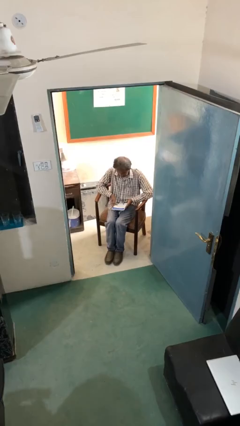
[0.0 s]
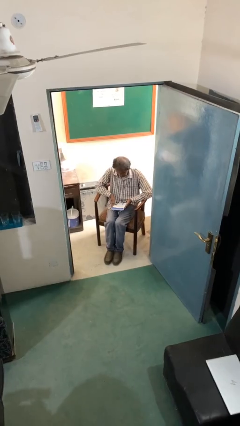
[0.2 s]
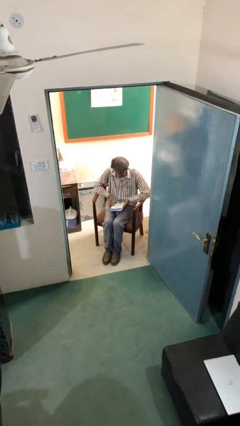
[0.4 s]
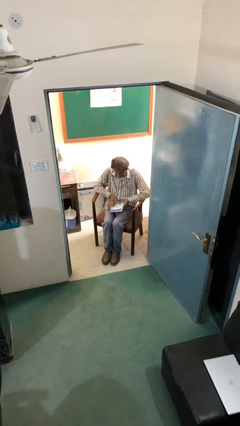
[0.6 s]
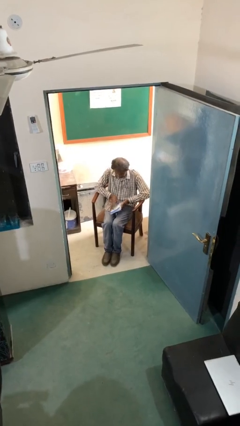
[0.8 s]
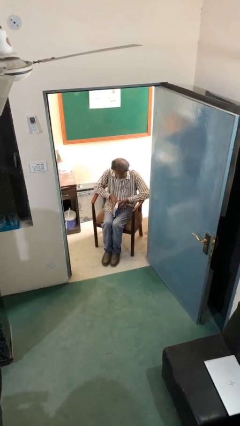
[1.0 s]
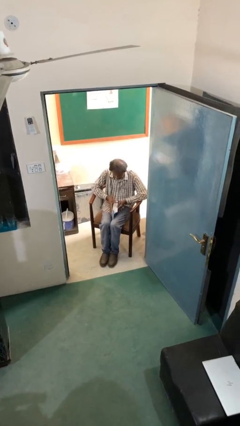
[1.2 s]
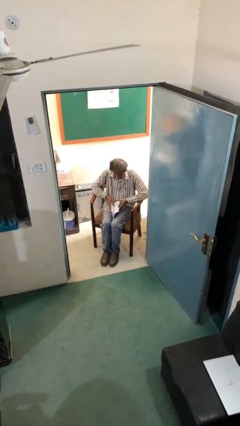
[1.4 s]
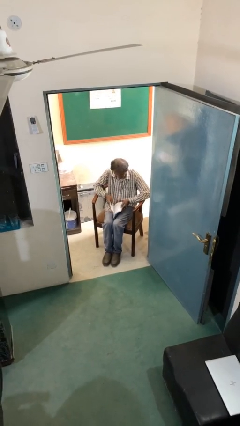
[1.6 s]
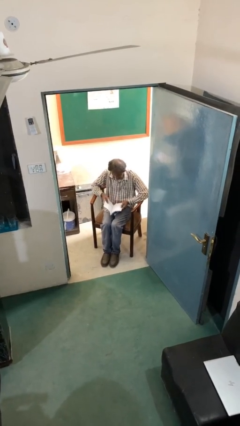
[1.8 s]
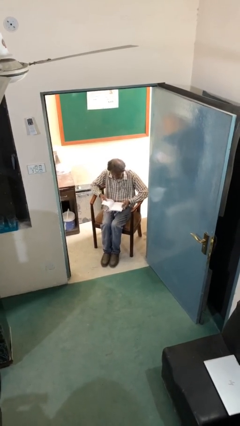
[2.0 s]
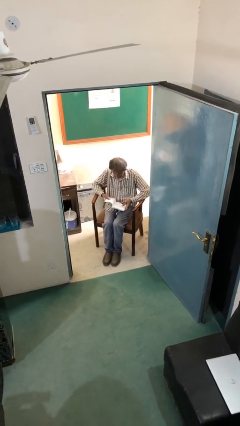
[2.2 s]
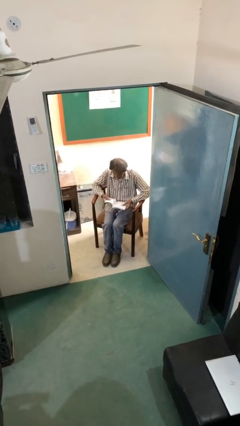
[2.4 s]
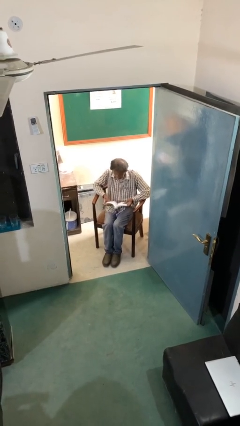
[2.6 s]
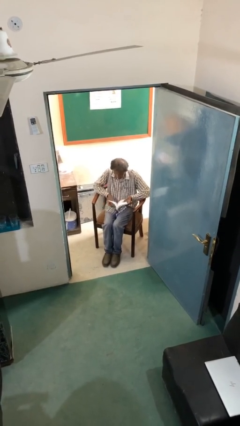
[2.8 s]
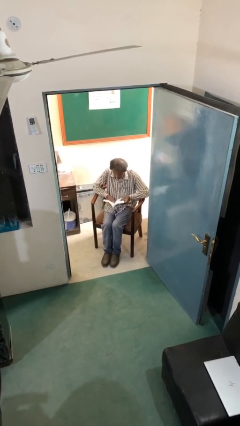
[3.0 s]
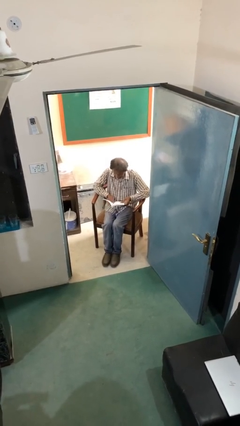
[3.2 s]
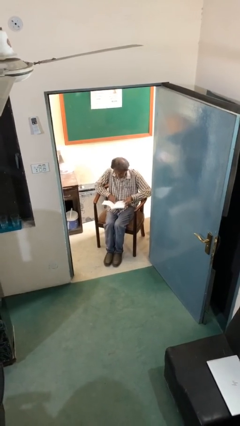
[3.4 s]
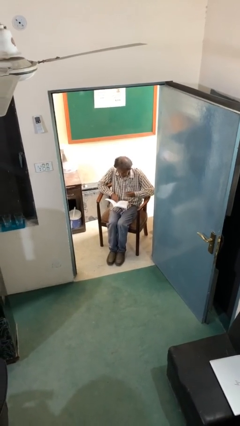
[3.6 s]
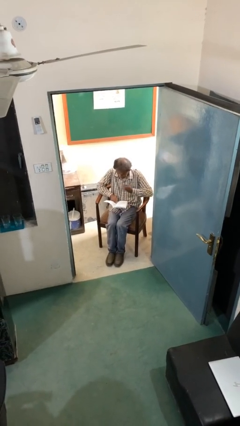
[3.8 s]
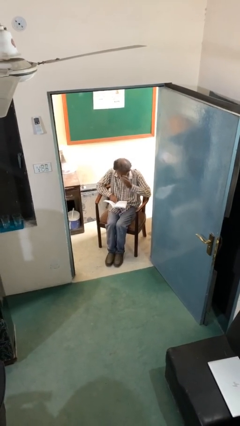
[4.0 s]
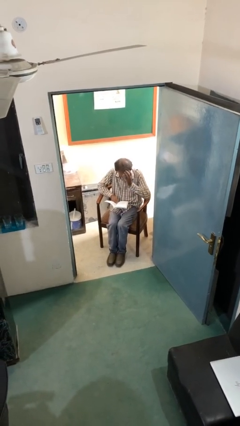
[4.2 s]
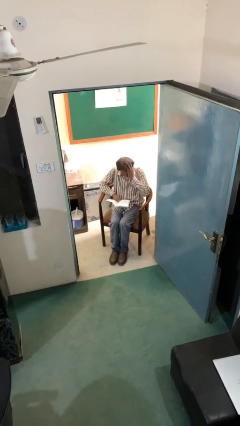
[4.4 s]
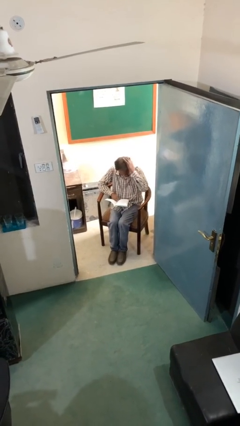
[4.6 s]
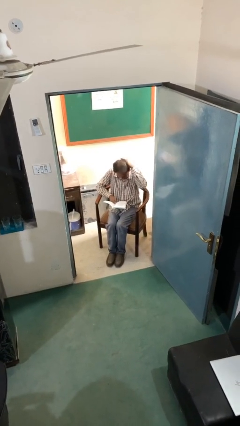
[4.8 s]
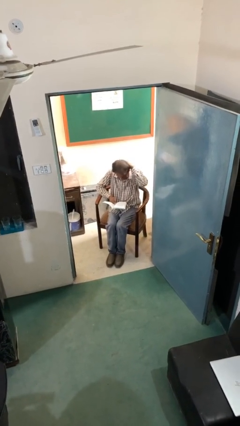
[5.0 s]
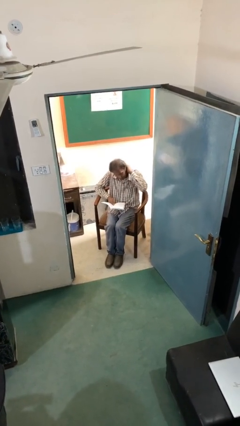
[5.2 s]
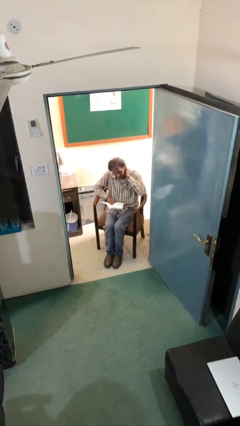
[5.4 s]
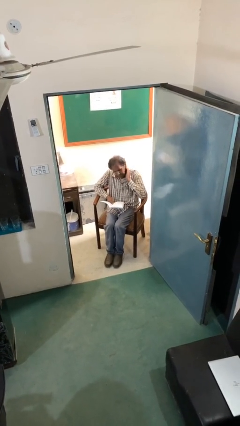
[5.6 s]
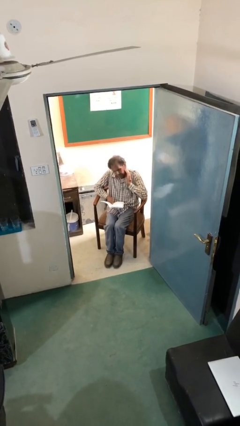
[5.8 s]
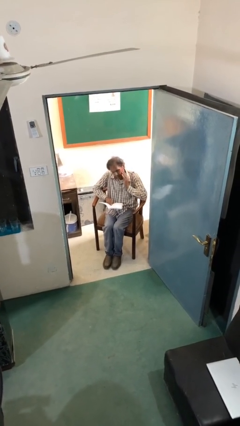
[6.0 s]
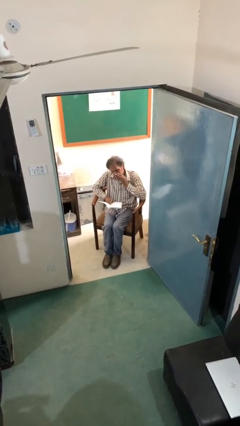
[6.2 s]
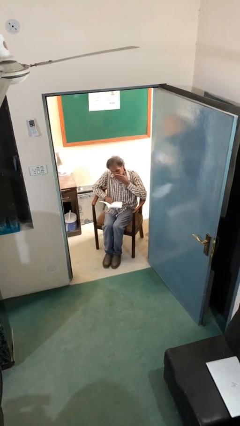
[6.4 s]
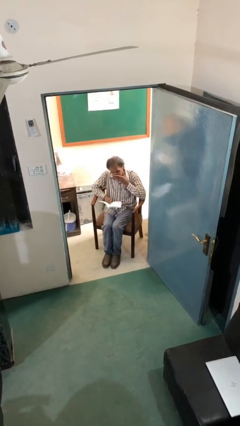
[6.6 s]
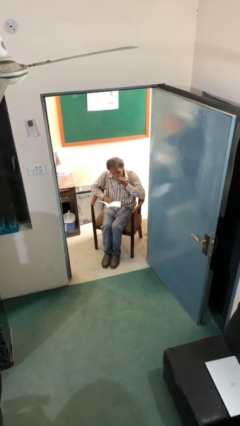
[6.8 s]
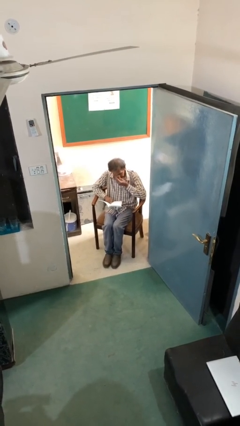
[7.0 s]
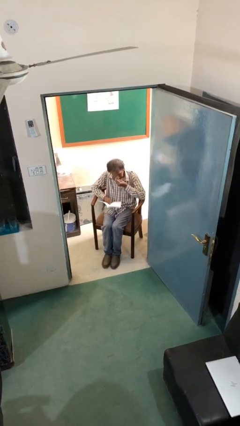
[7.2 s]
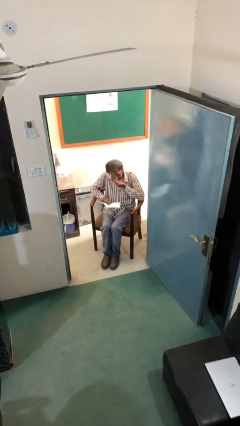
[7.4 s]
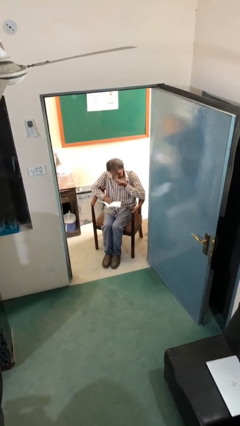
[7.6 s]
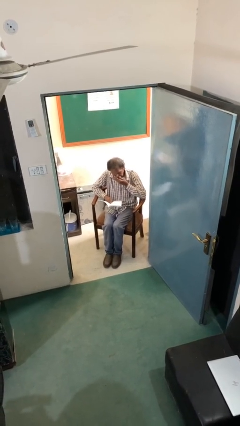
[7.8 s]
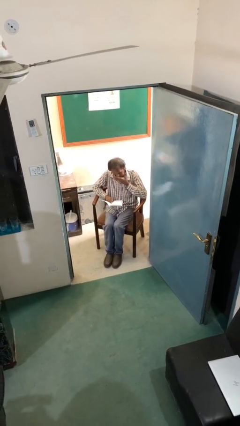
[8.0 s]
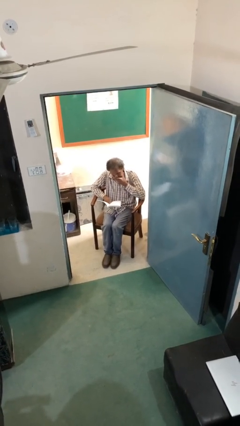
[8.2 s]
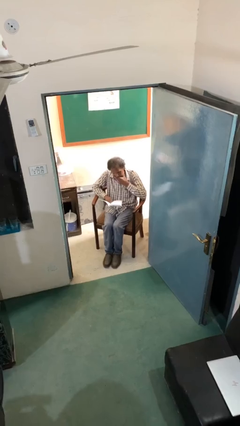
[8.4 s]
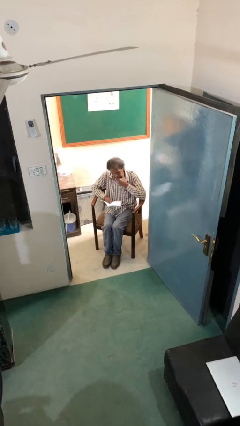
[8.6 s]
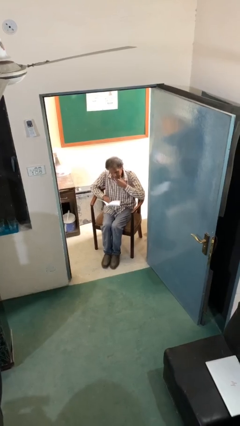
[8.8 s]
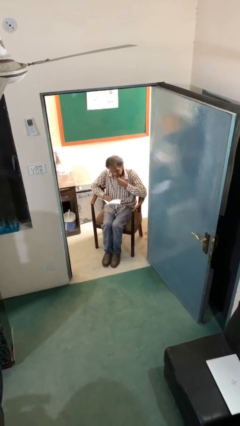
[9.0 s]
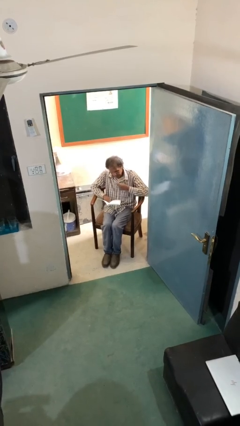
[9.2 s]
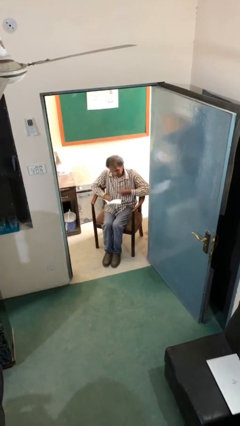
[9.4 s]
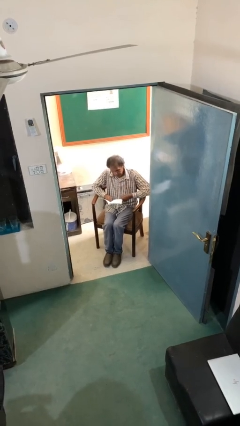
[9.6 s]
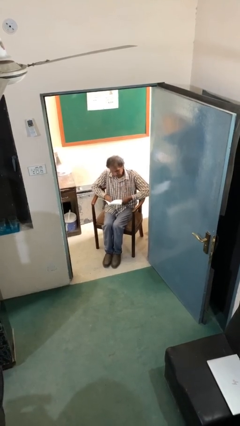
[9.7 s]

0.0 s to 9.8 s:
person reads document

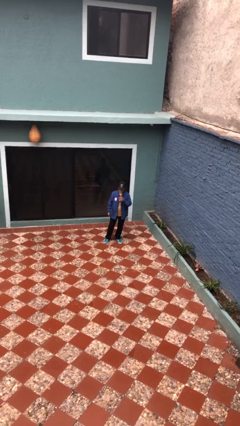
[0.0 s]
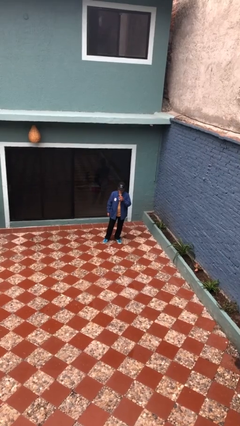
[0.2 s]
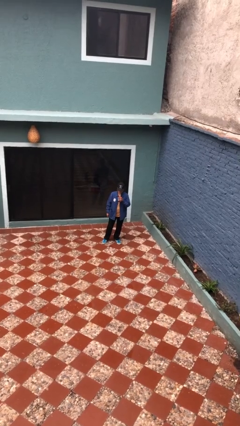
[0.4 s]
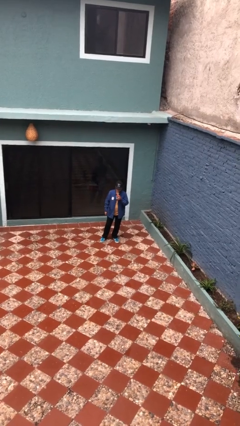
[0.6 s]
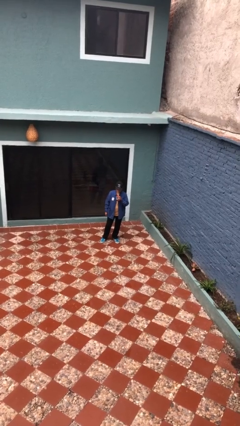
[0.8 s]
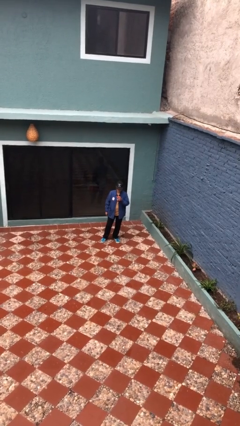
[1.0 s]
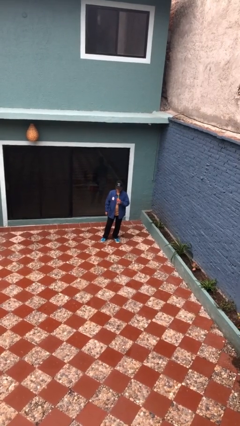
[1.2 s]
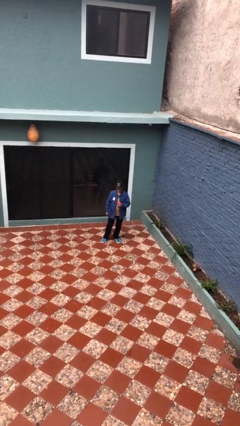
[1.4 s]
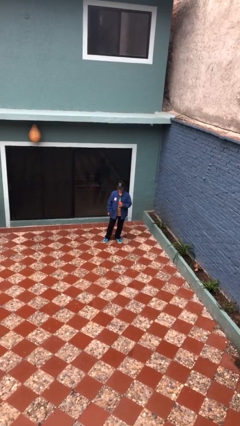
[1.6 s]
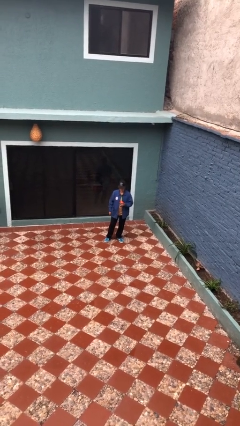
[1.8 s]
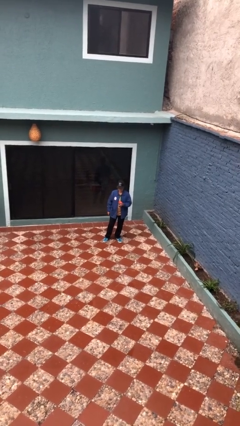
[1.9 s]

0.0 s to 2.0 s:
person drinks from straw

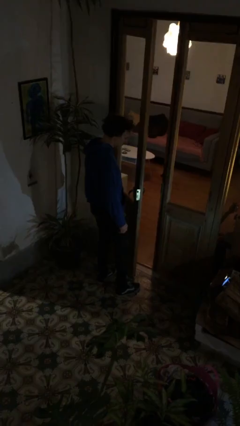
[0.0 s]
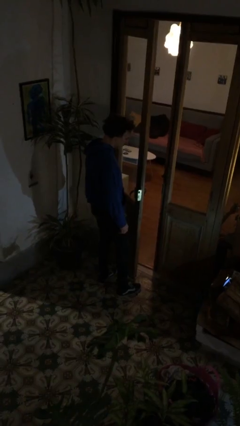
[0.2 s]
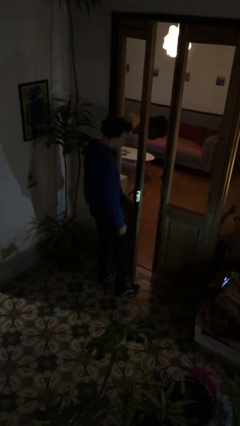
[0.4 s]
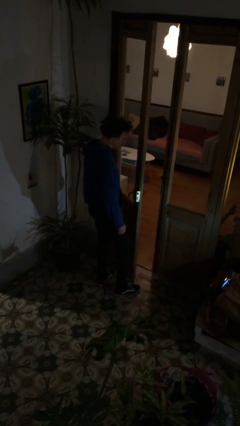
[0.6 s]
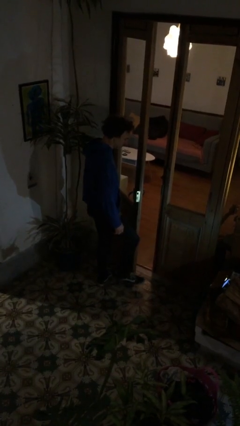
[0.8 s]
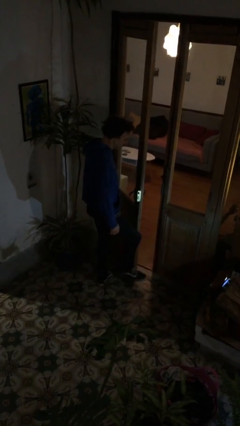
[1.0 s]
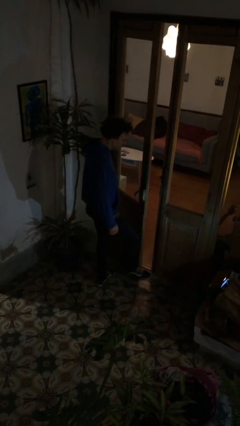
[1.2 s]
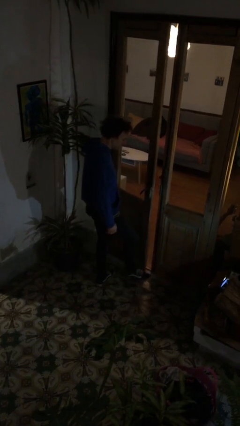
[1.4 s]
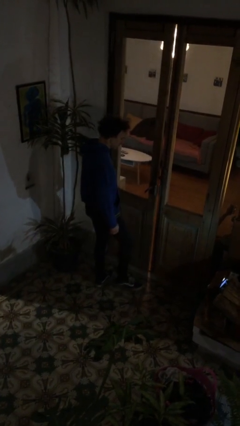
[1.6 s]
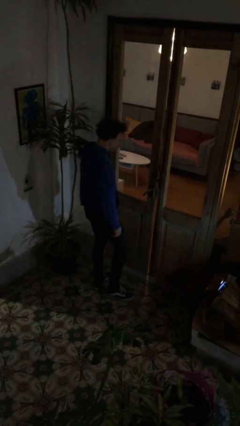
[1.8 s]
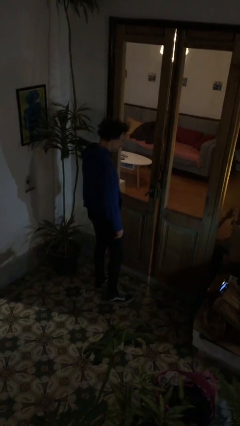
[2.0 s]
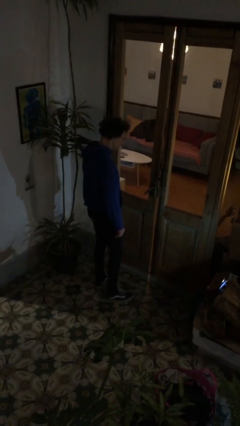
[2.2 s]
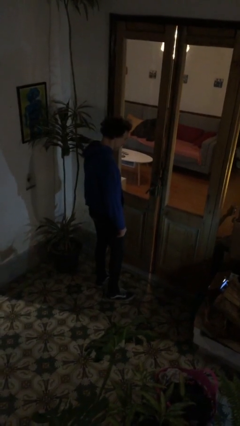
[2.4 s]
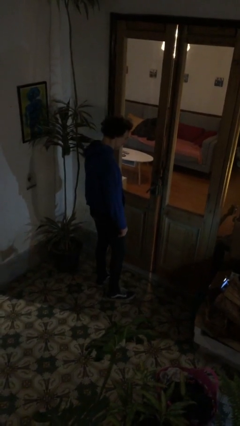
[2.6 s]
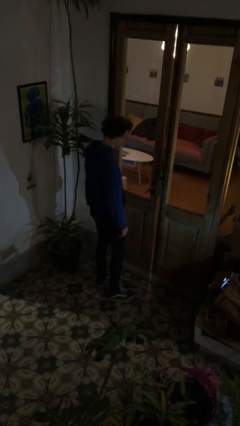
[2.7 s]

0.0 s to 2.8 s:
person closes door with foot

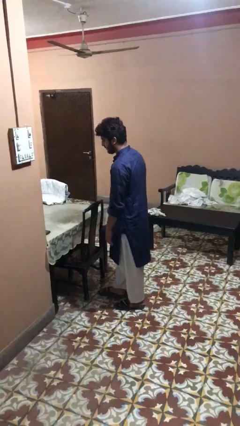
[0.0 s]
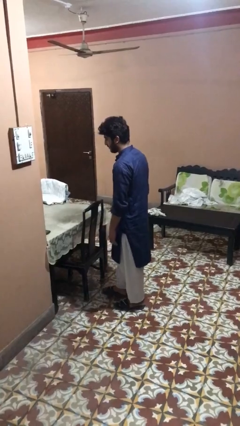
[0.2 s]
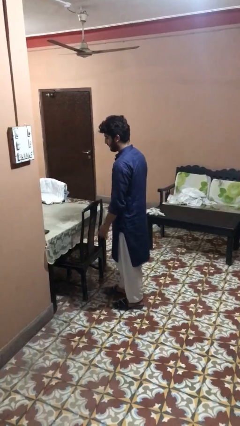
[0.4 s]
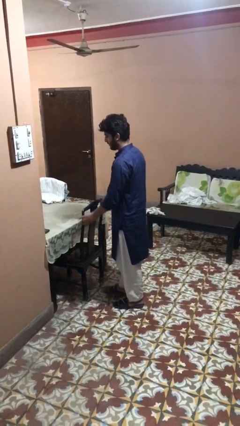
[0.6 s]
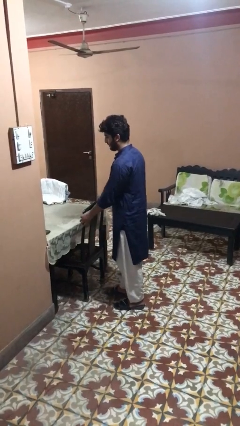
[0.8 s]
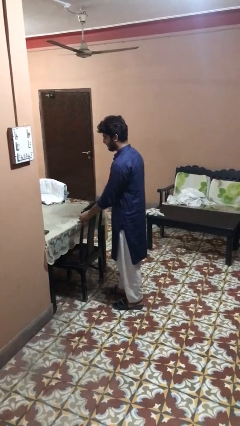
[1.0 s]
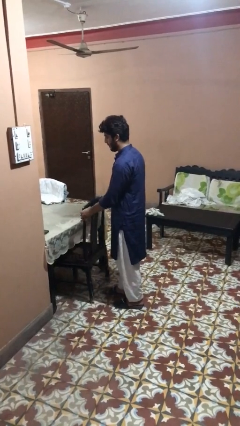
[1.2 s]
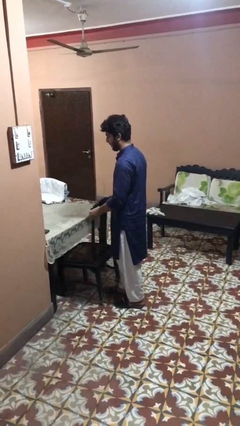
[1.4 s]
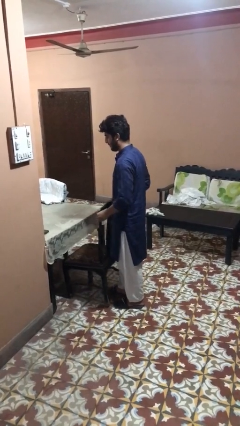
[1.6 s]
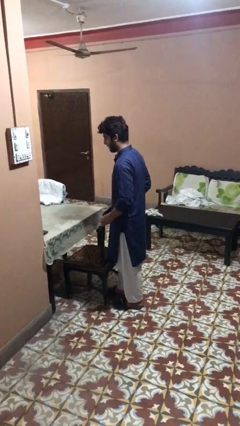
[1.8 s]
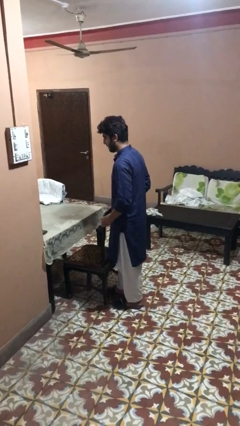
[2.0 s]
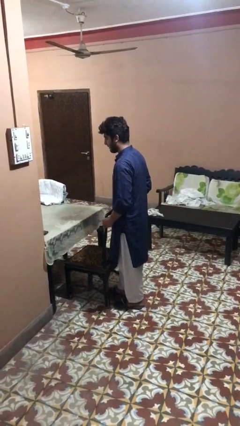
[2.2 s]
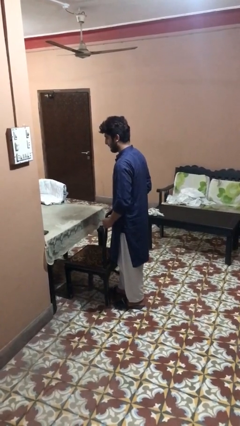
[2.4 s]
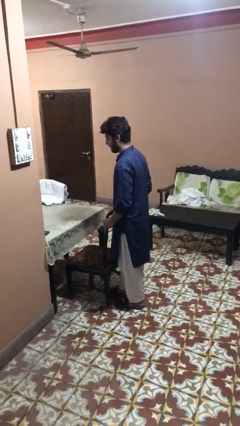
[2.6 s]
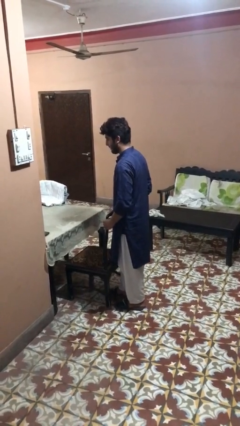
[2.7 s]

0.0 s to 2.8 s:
person pulls out chair

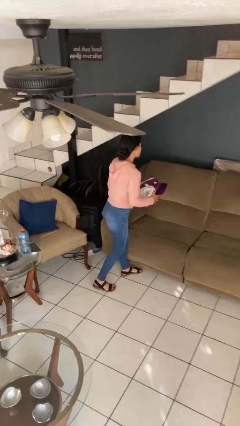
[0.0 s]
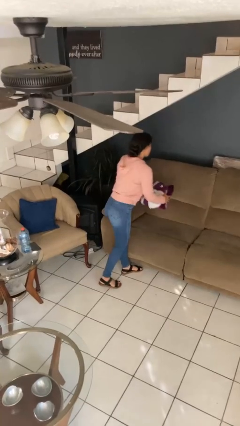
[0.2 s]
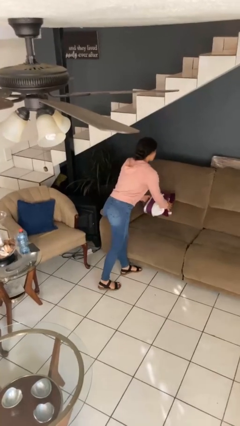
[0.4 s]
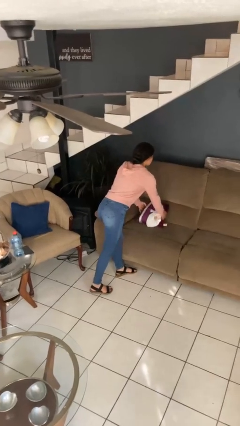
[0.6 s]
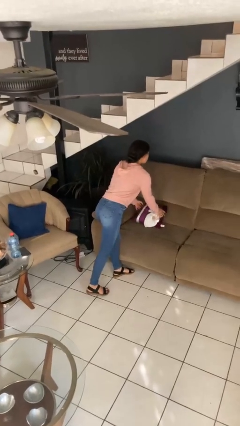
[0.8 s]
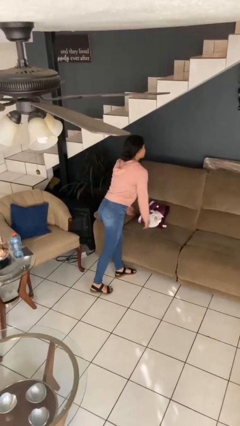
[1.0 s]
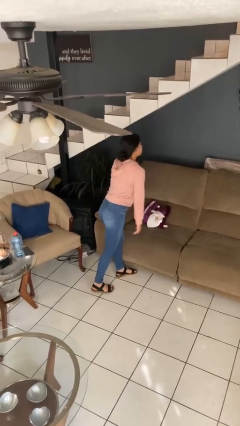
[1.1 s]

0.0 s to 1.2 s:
person puts down object on couch
